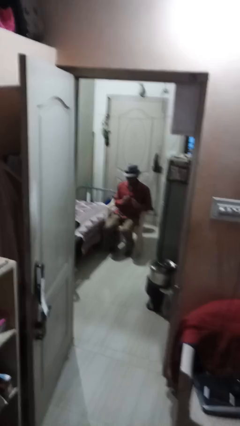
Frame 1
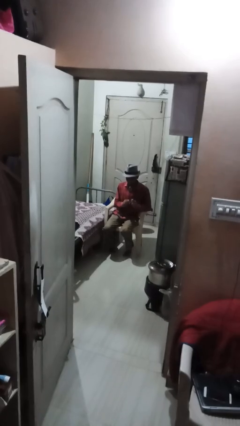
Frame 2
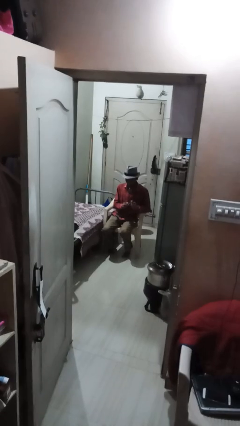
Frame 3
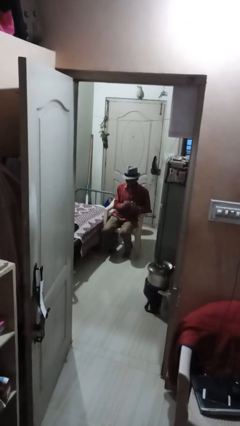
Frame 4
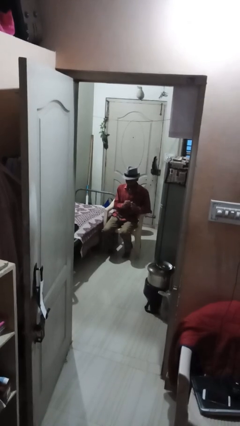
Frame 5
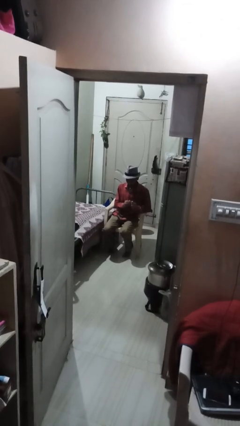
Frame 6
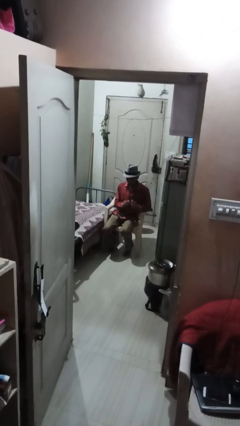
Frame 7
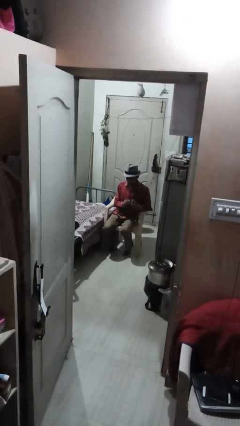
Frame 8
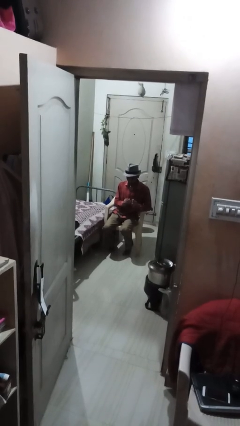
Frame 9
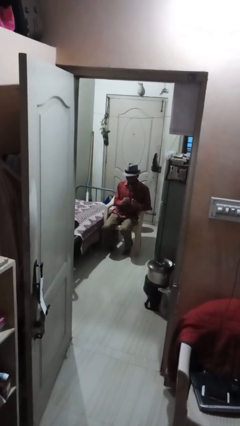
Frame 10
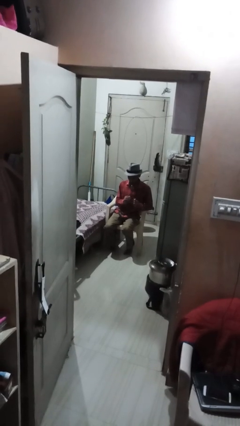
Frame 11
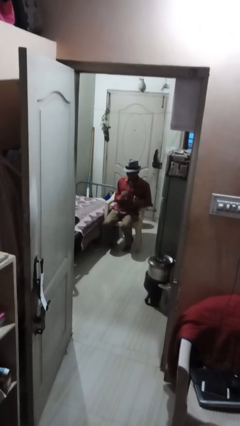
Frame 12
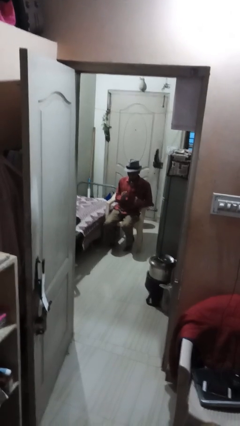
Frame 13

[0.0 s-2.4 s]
person files fingernails

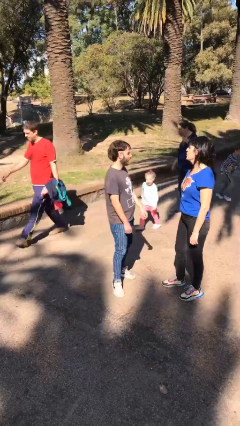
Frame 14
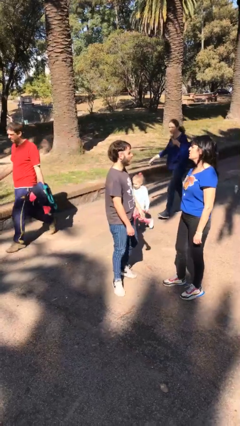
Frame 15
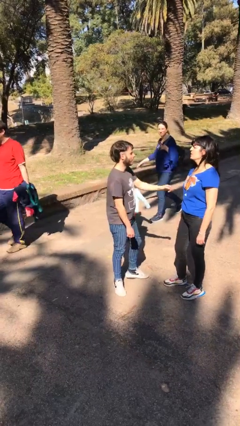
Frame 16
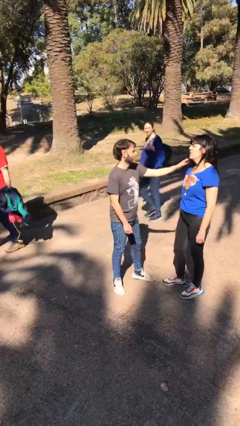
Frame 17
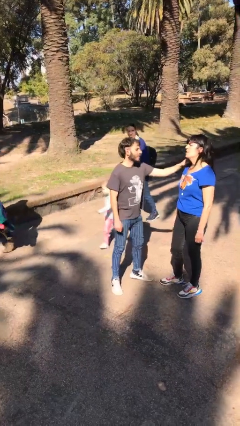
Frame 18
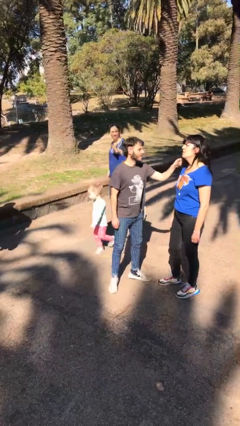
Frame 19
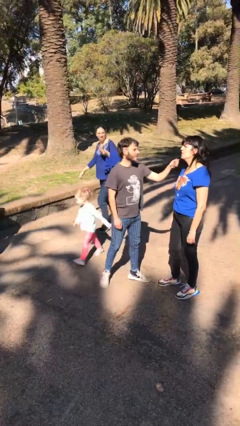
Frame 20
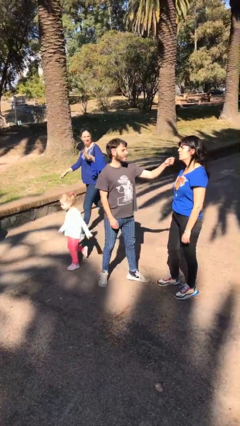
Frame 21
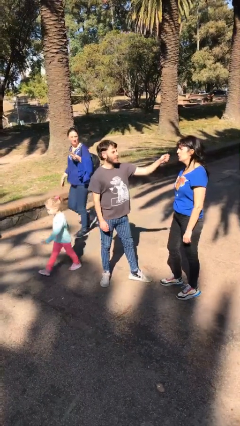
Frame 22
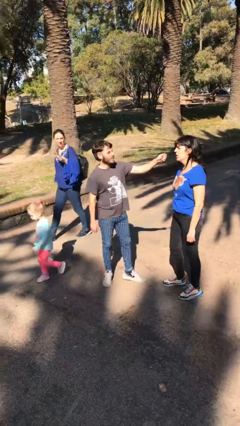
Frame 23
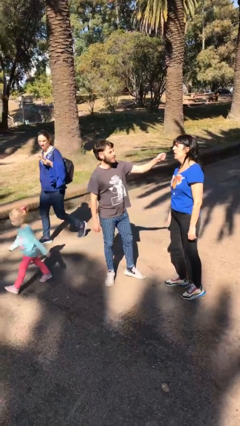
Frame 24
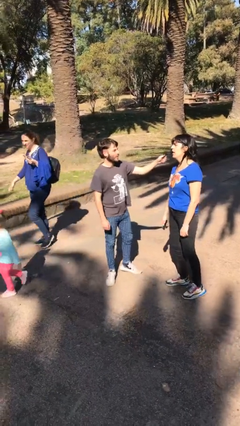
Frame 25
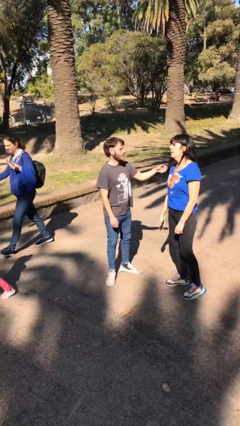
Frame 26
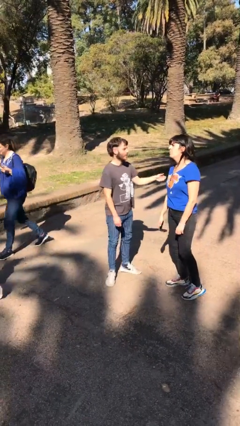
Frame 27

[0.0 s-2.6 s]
person grabs person by hair

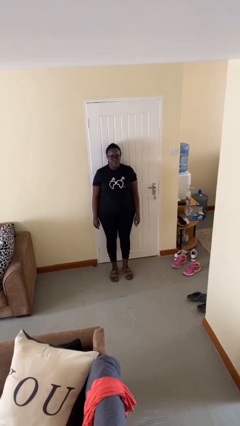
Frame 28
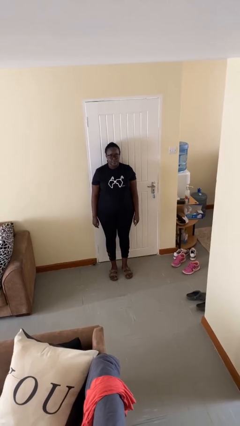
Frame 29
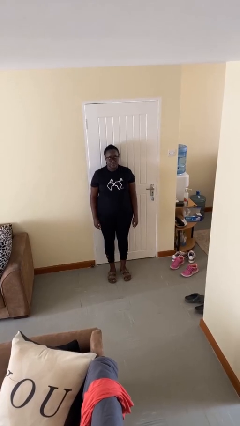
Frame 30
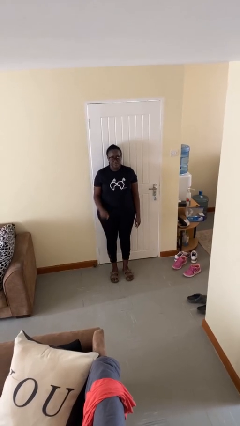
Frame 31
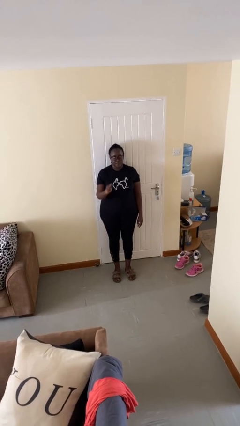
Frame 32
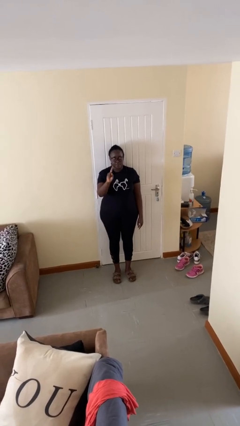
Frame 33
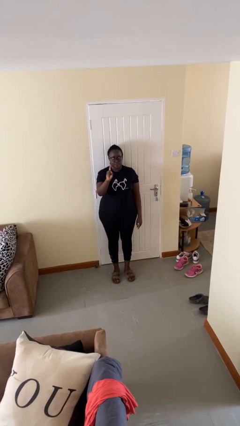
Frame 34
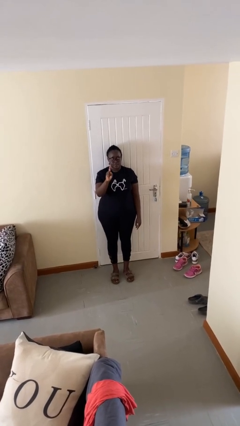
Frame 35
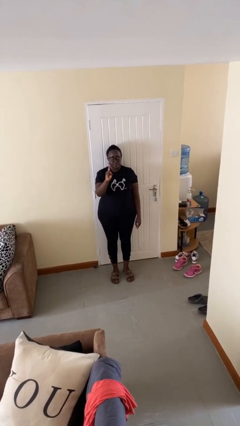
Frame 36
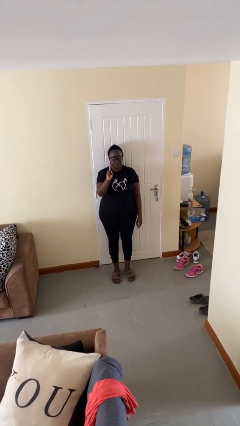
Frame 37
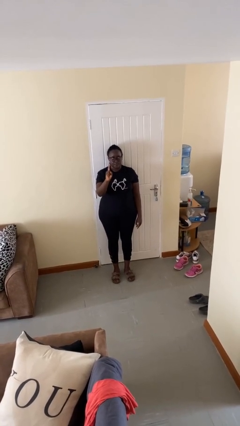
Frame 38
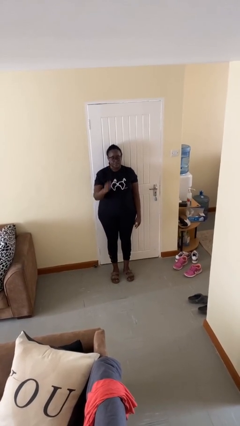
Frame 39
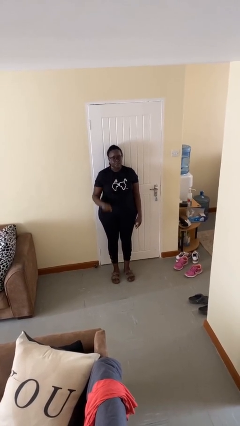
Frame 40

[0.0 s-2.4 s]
person gestures number one

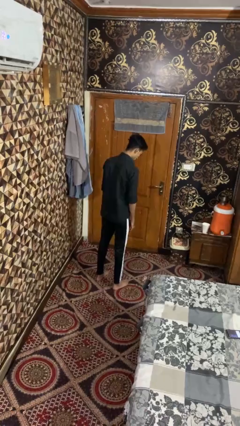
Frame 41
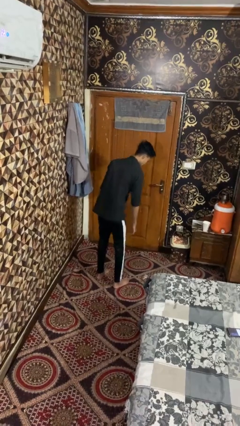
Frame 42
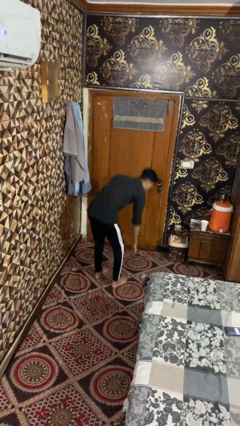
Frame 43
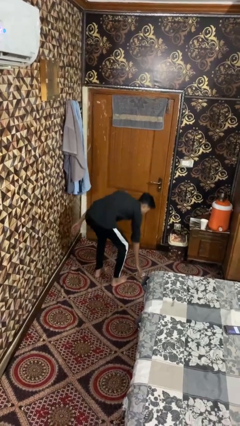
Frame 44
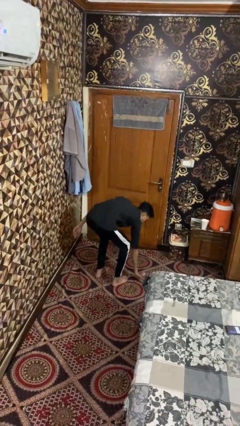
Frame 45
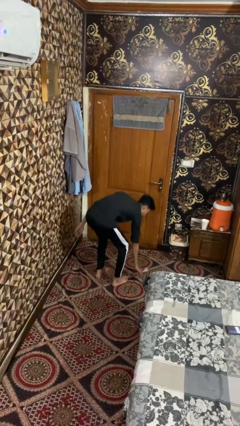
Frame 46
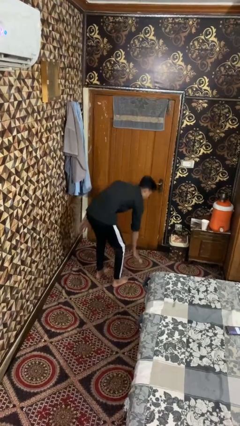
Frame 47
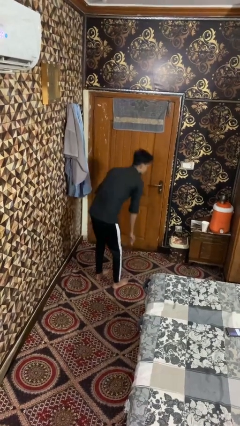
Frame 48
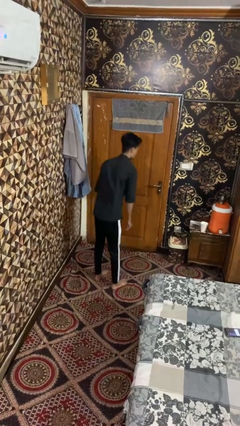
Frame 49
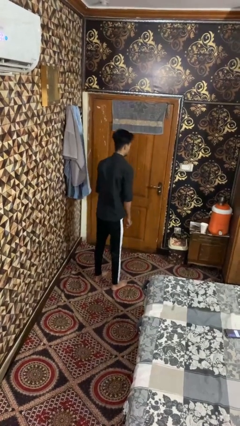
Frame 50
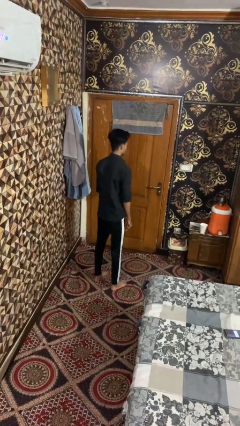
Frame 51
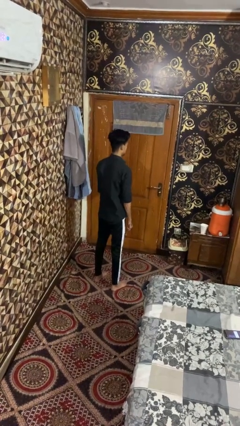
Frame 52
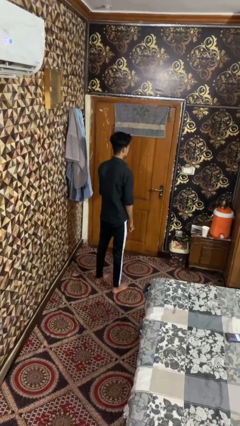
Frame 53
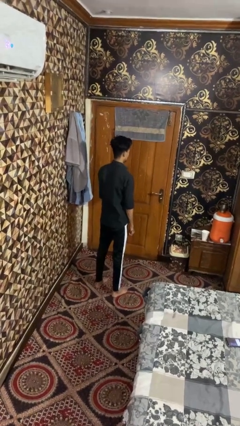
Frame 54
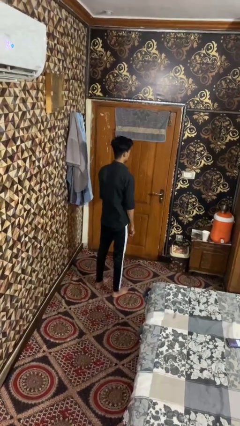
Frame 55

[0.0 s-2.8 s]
person picks up object from floor

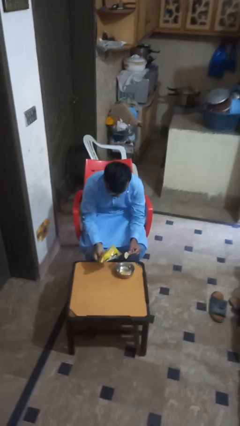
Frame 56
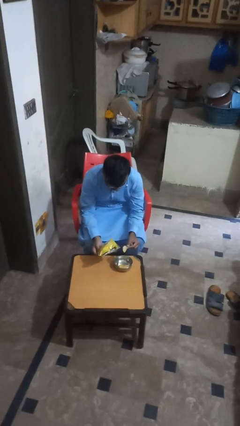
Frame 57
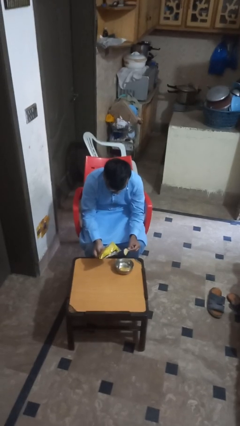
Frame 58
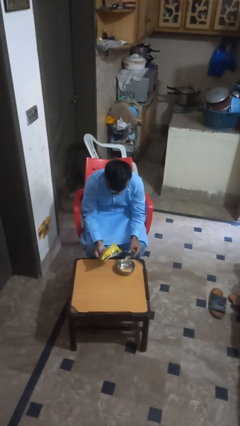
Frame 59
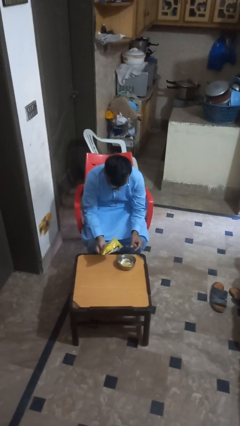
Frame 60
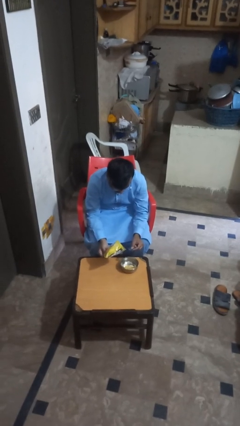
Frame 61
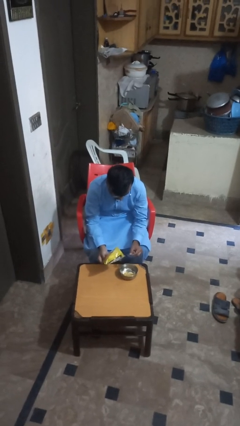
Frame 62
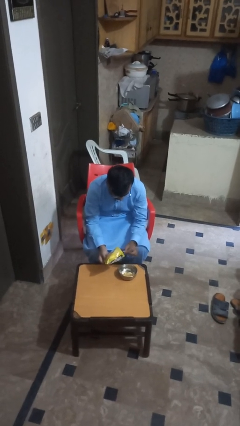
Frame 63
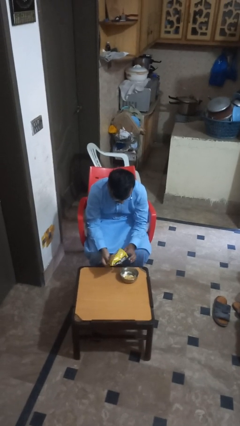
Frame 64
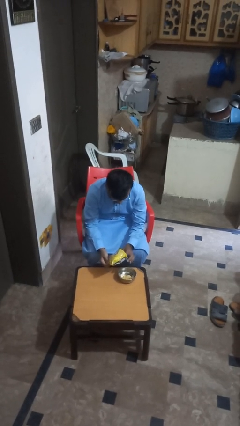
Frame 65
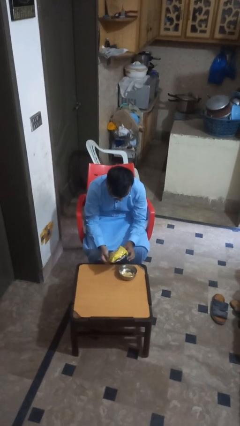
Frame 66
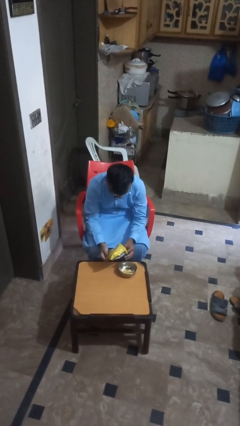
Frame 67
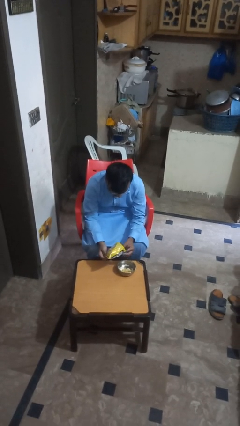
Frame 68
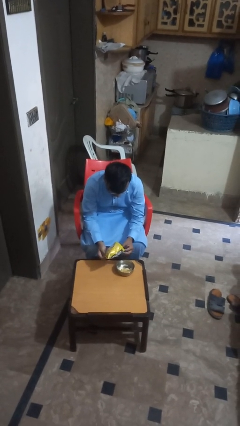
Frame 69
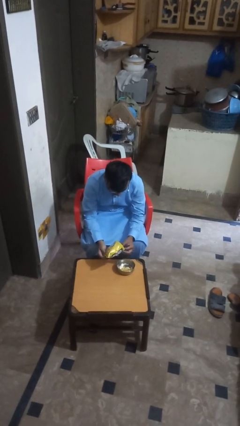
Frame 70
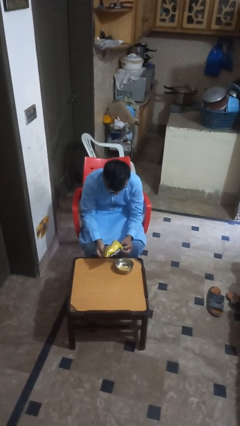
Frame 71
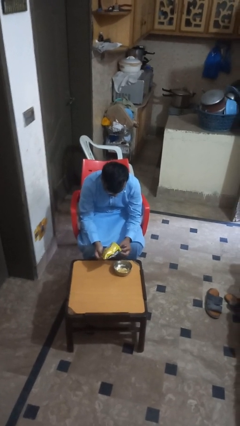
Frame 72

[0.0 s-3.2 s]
person pours into bowl

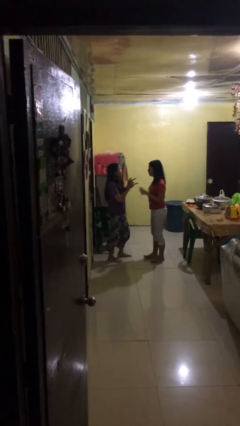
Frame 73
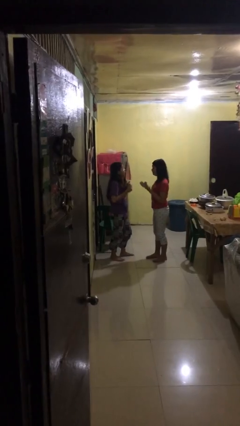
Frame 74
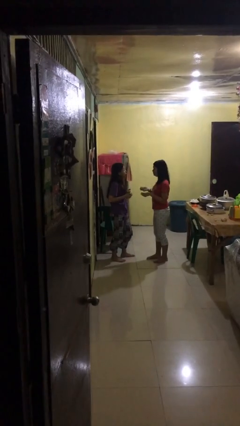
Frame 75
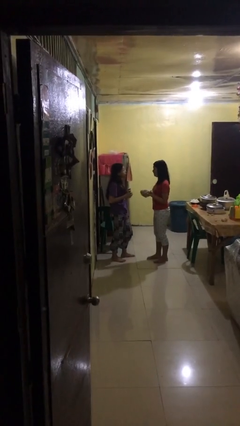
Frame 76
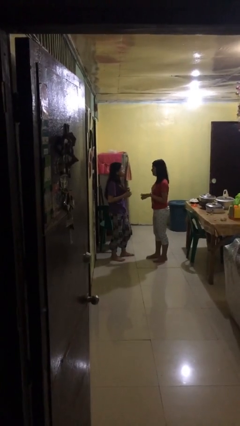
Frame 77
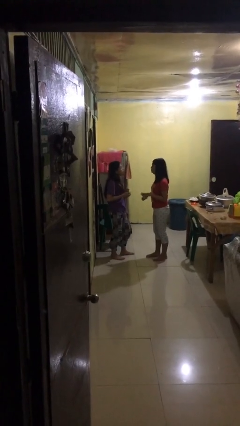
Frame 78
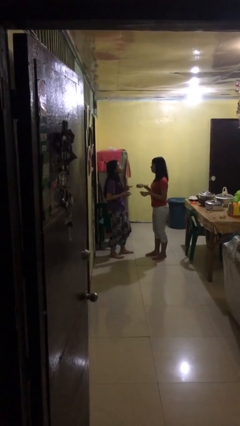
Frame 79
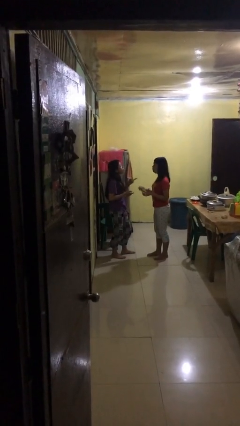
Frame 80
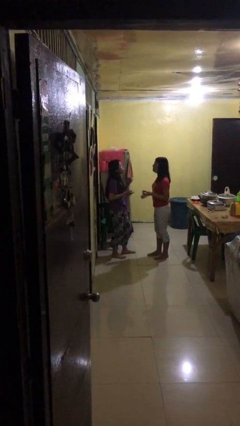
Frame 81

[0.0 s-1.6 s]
person talks to person

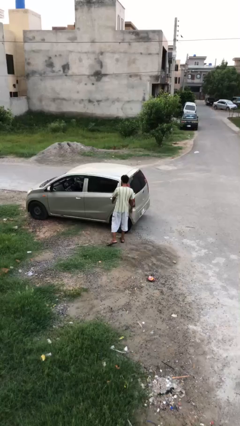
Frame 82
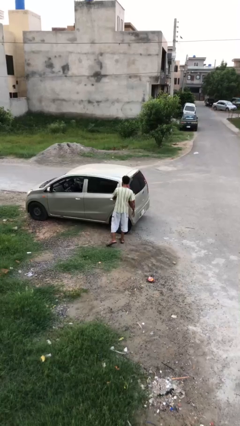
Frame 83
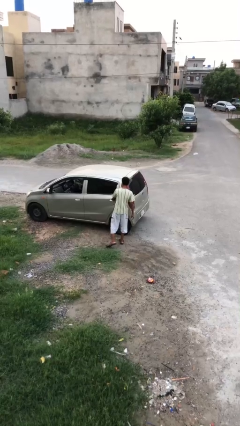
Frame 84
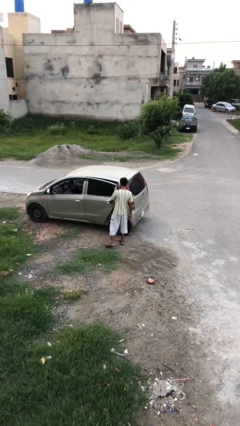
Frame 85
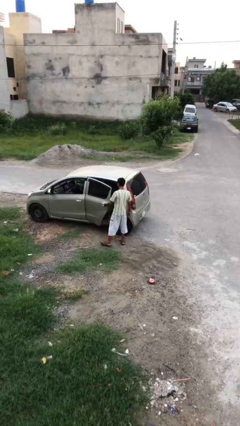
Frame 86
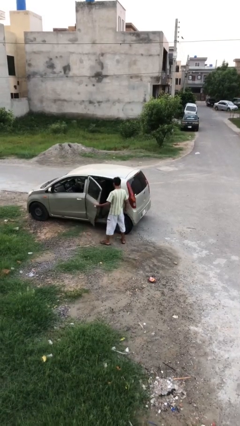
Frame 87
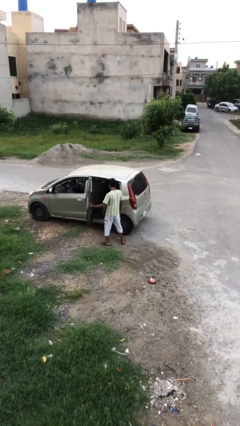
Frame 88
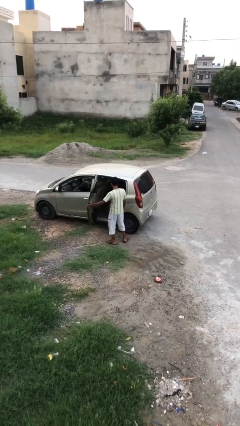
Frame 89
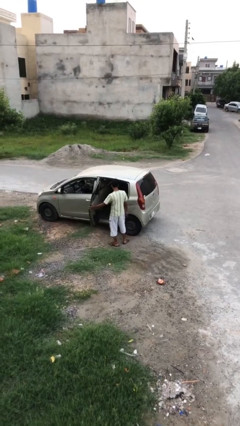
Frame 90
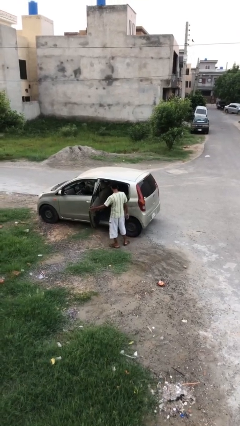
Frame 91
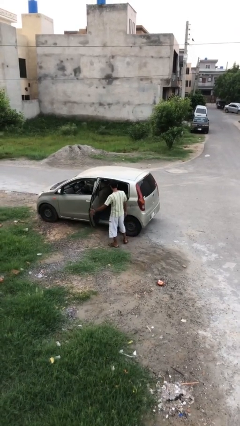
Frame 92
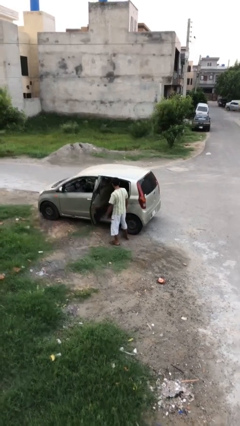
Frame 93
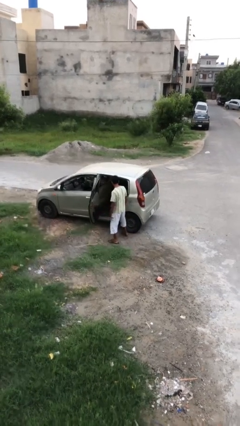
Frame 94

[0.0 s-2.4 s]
person opens car door
